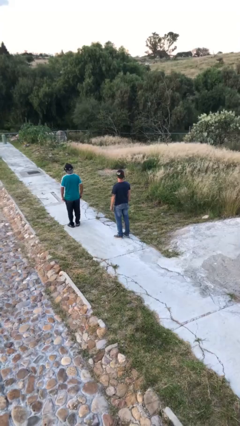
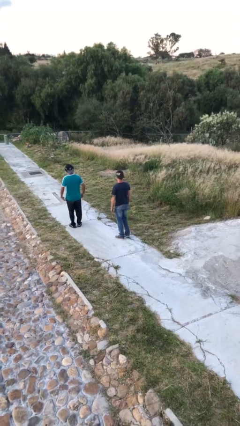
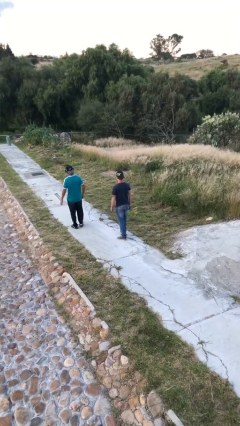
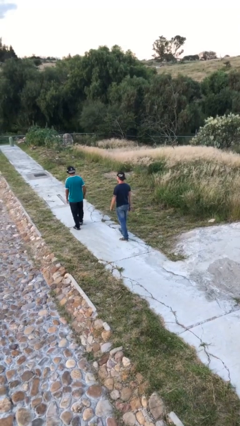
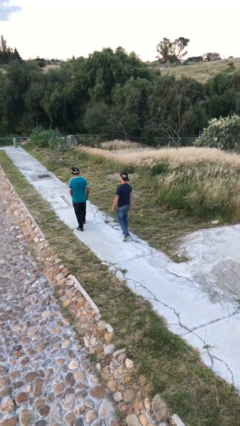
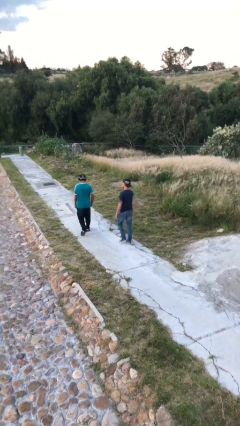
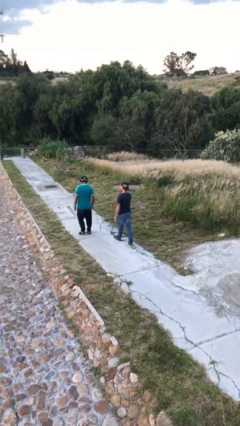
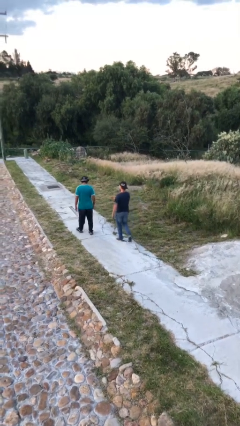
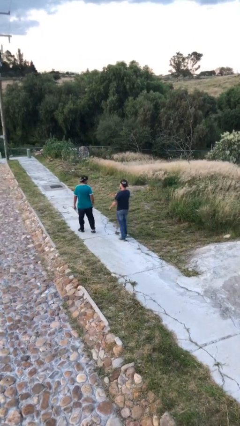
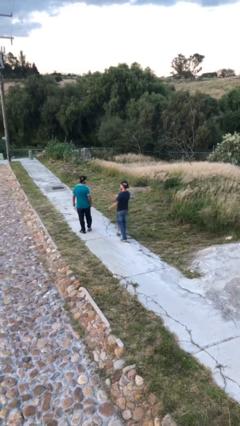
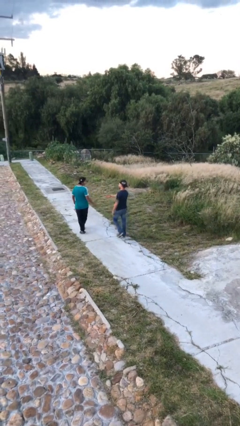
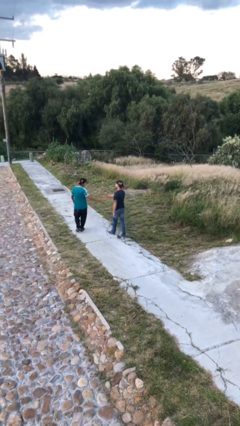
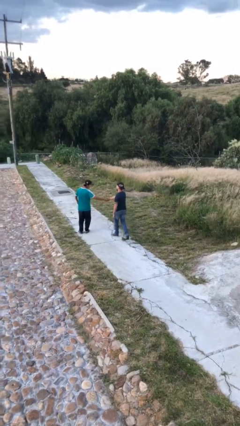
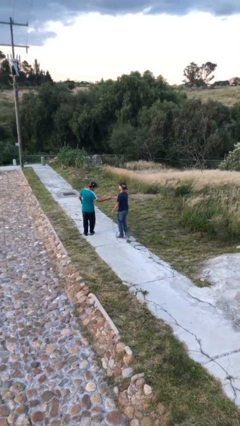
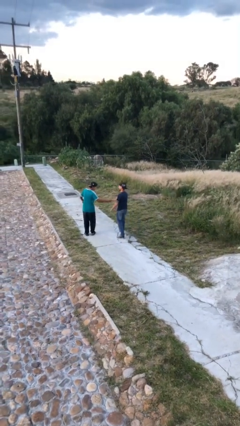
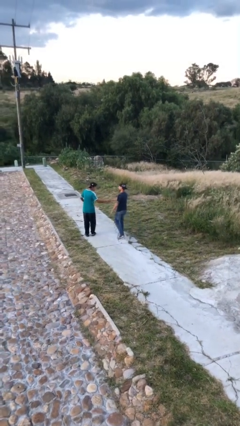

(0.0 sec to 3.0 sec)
person shakes hand

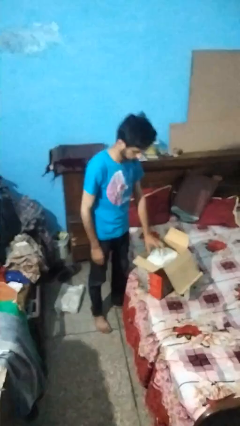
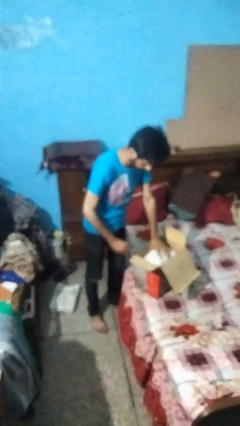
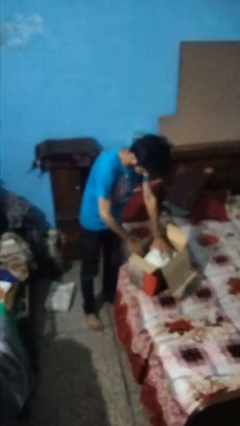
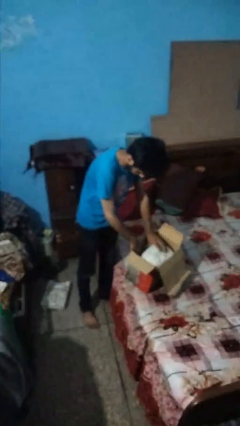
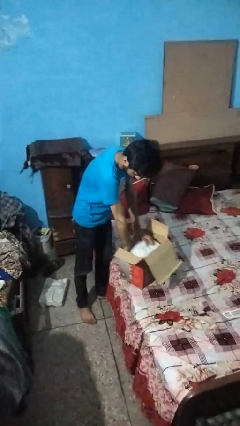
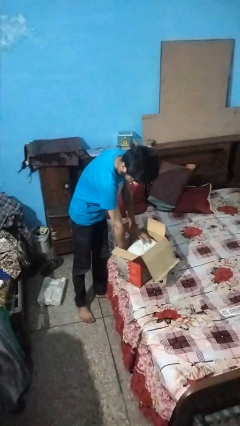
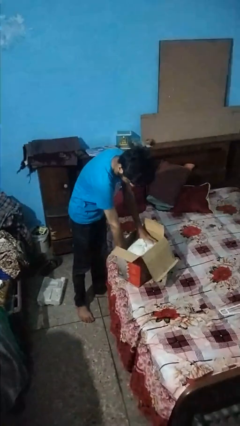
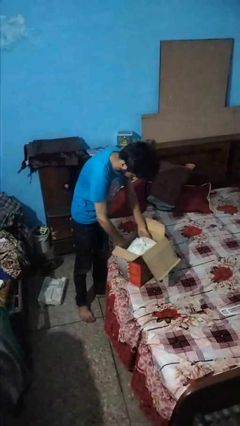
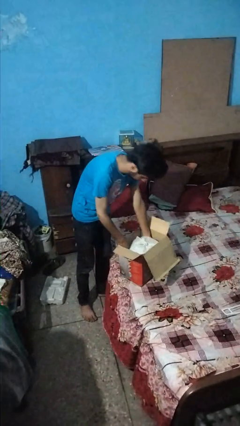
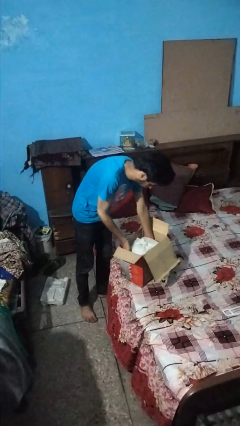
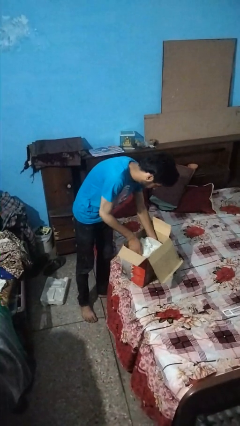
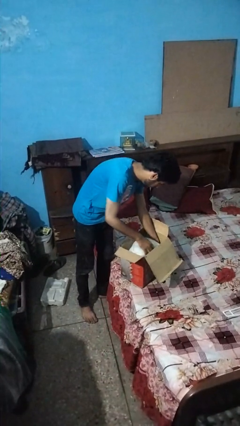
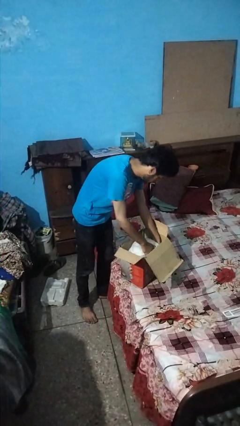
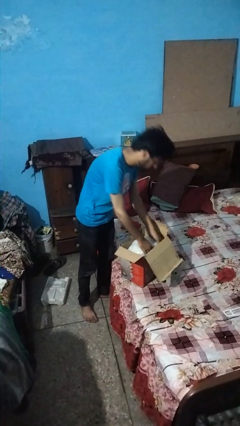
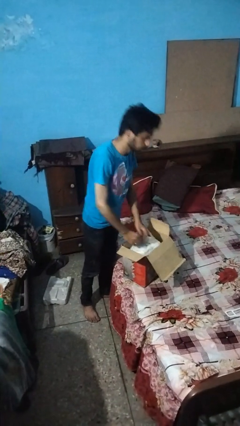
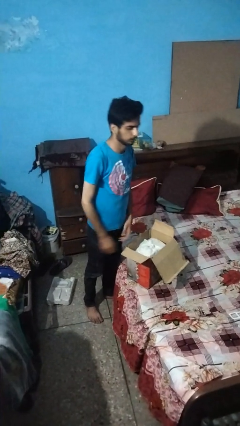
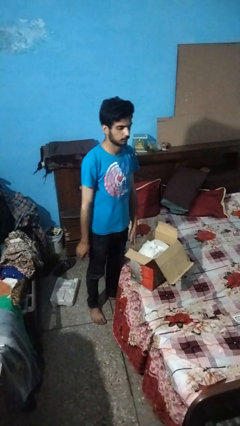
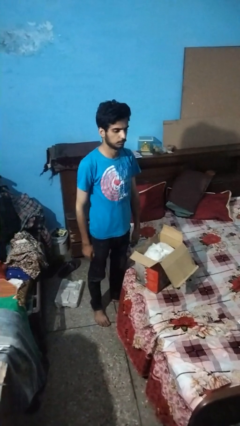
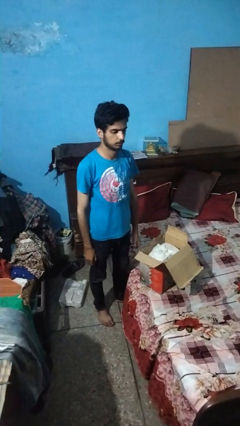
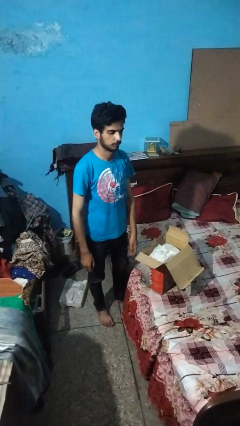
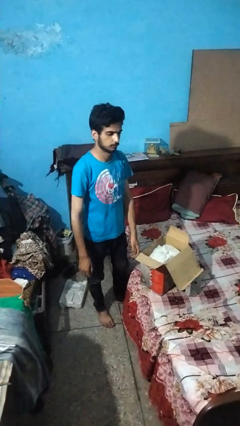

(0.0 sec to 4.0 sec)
person searches in box

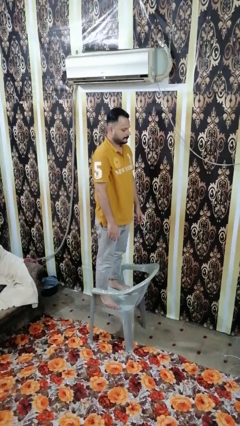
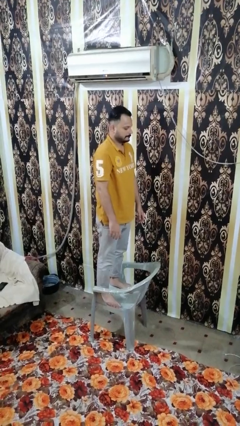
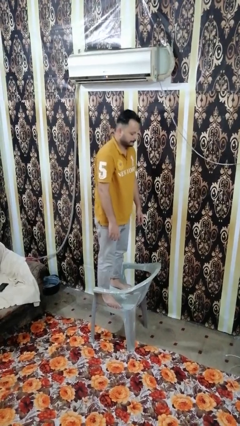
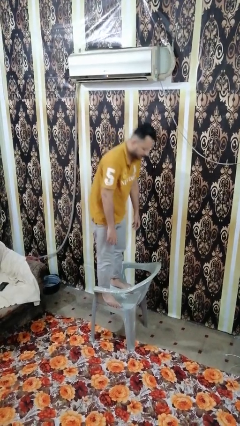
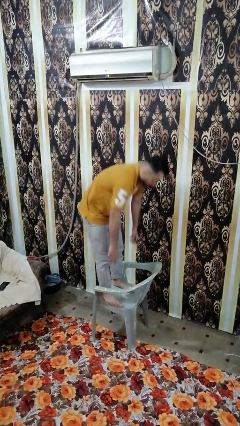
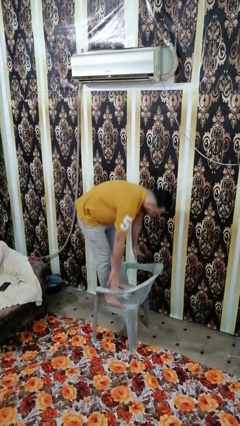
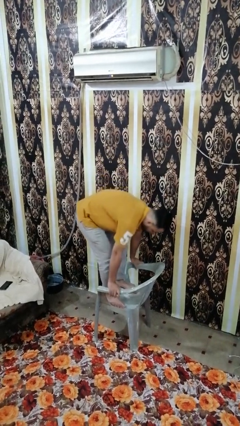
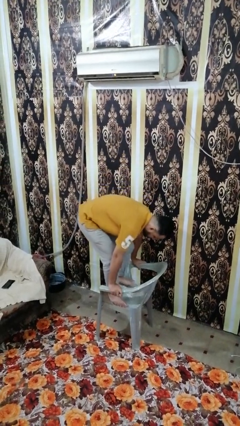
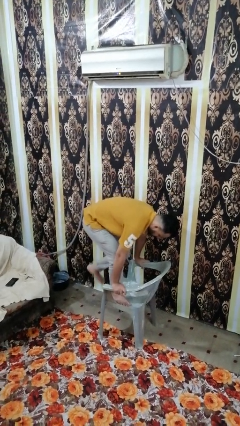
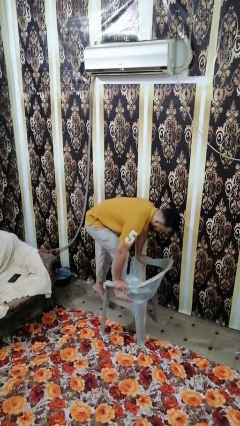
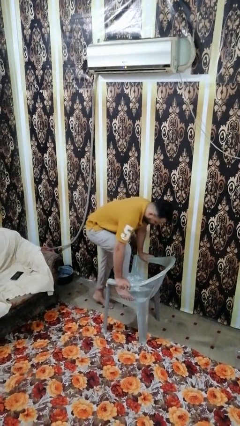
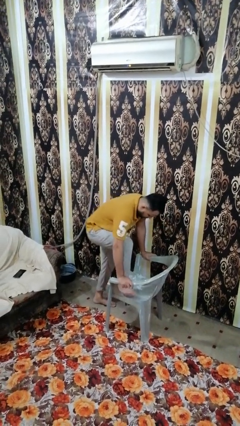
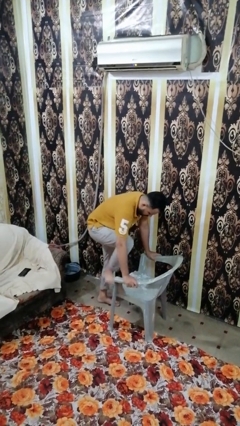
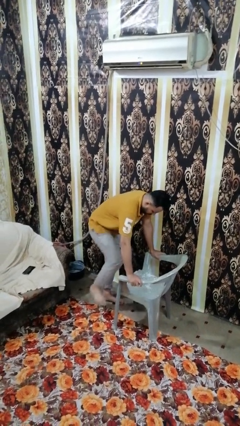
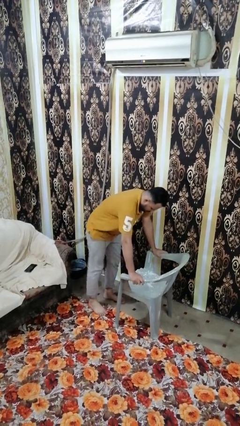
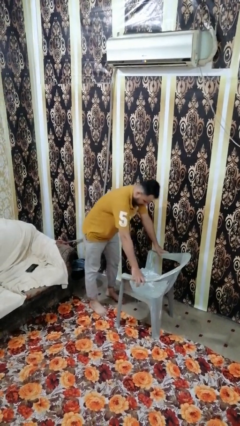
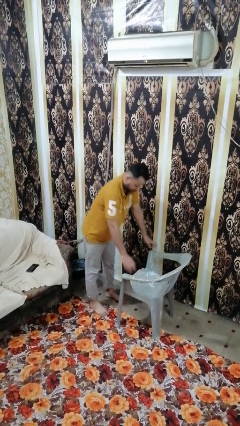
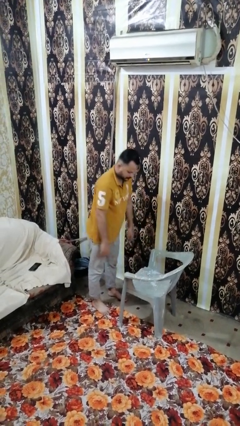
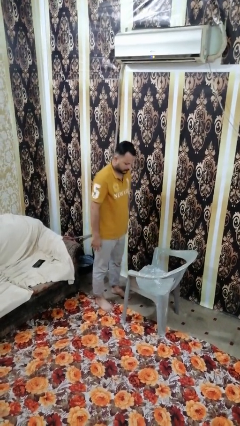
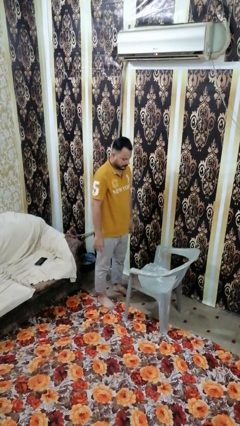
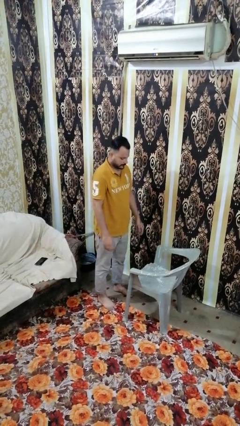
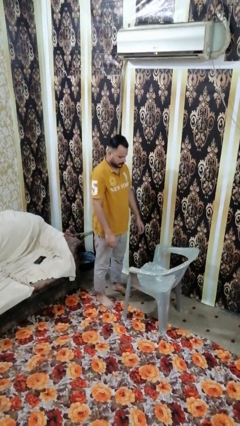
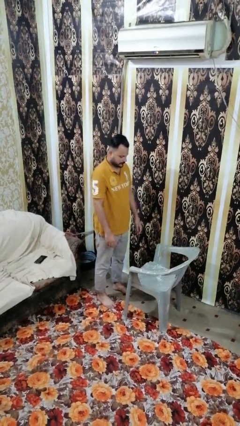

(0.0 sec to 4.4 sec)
person climbs off chair

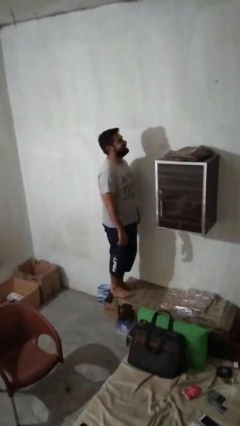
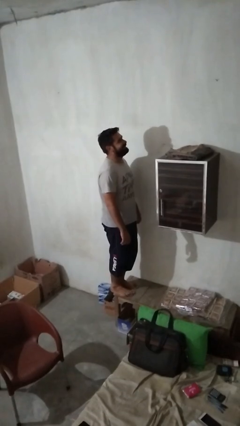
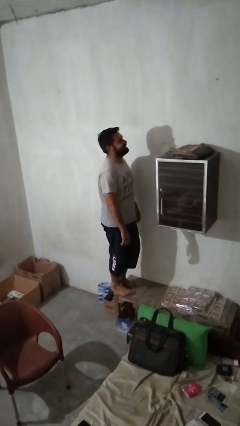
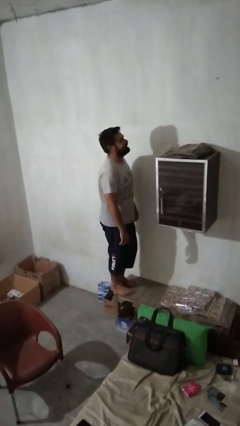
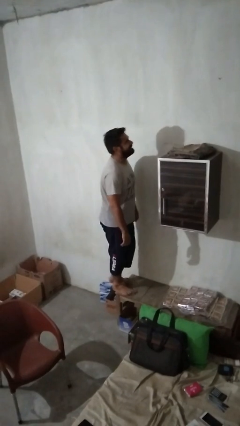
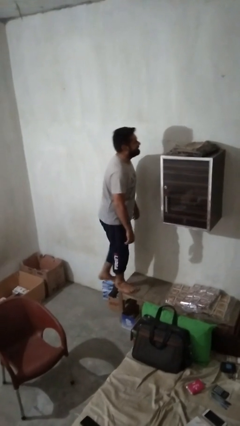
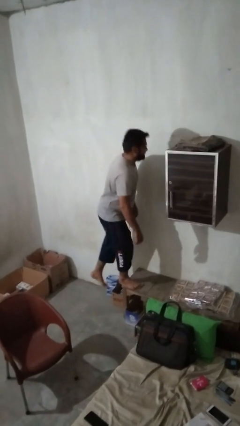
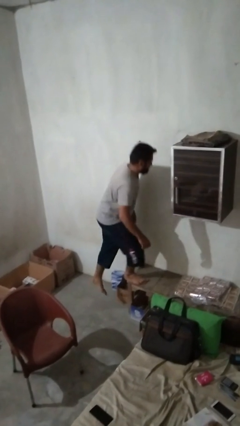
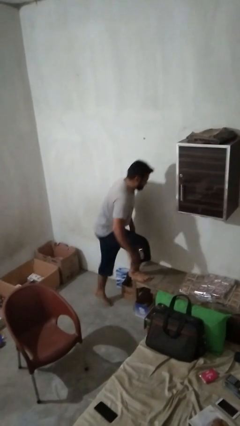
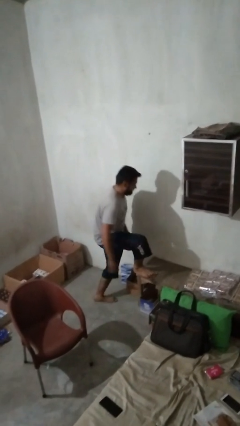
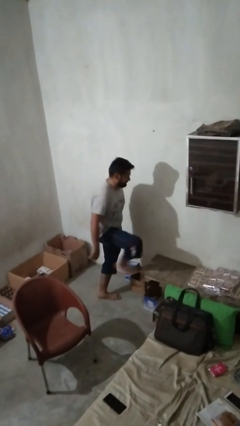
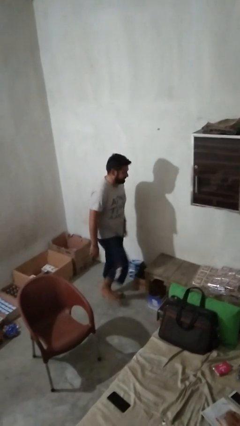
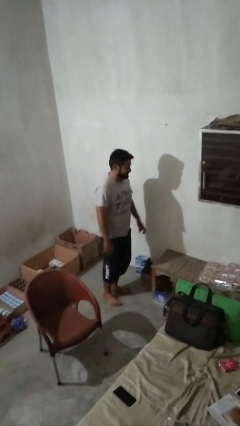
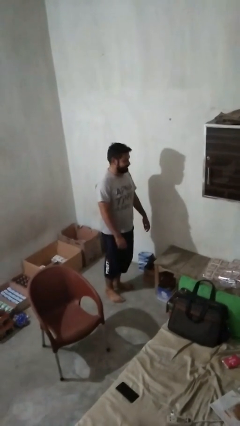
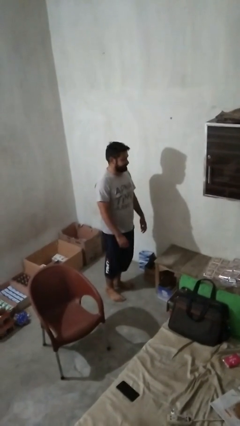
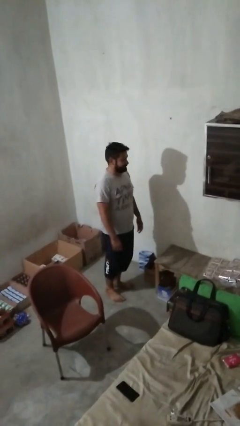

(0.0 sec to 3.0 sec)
person climbs off table

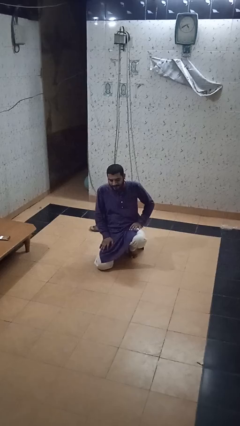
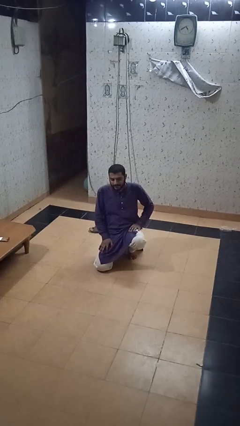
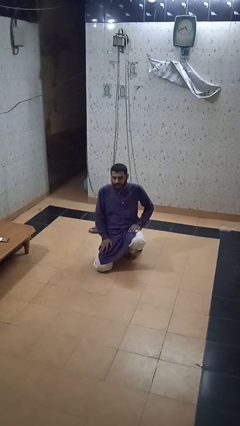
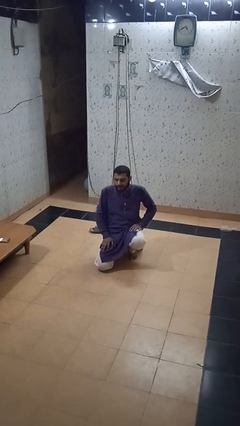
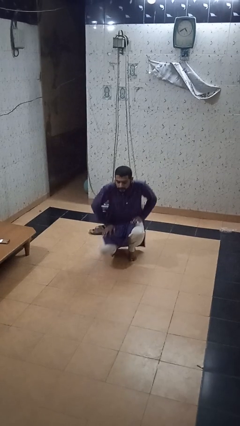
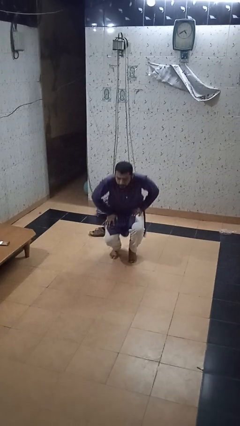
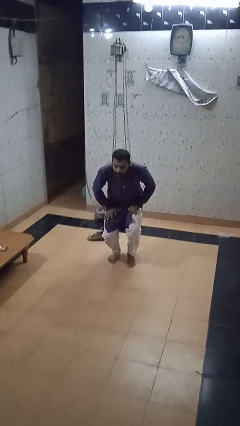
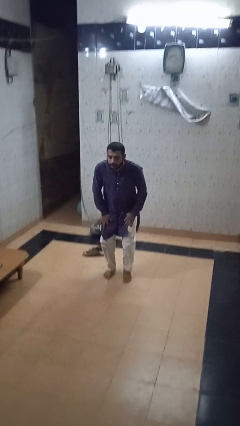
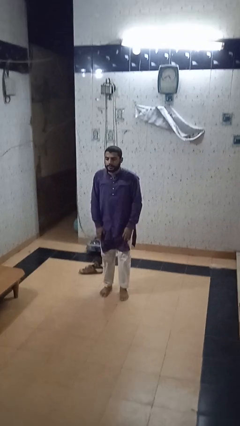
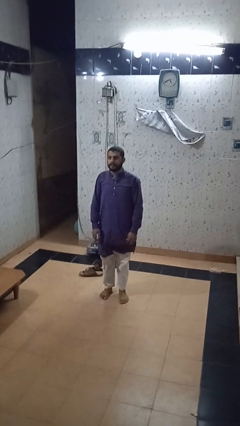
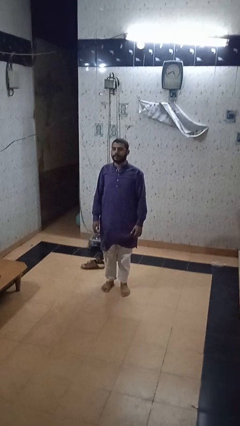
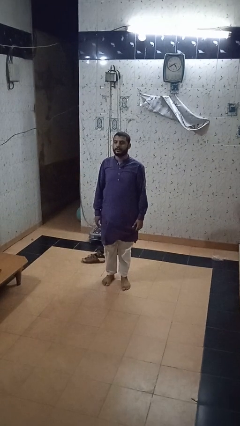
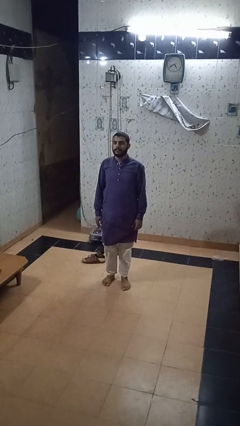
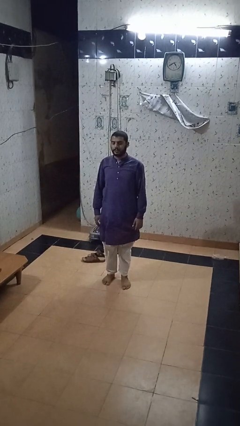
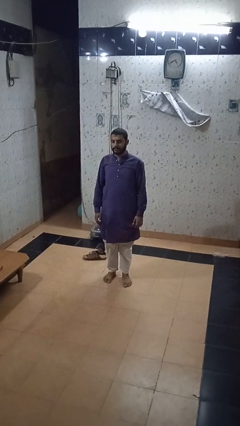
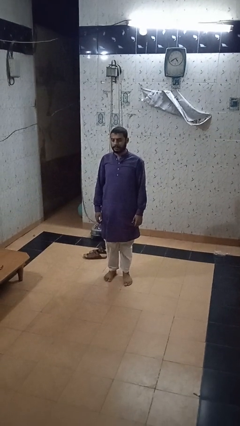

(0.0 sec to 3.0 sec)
person stands up from floor

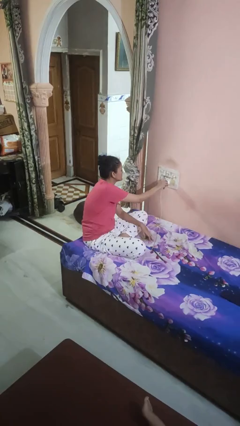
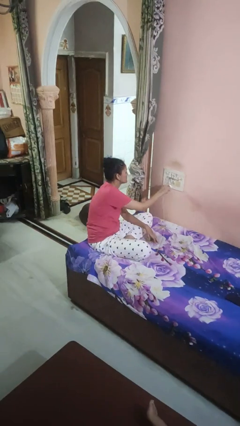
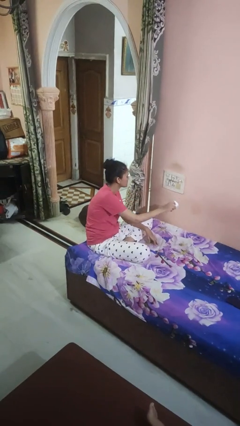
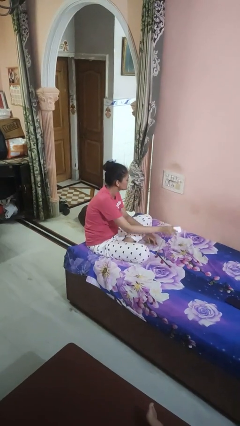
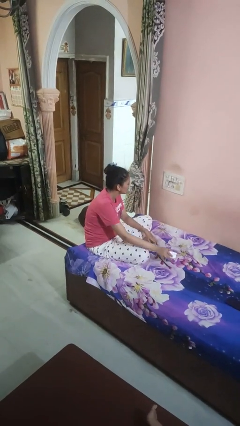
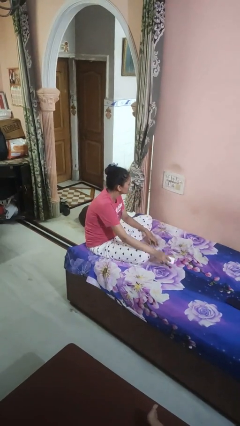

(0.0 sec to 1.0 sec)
person unplugs from electrical socket
